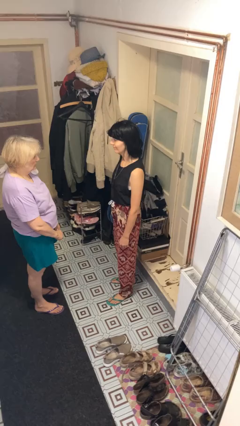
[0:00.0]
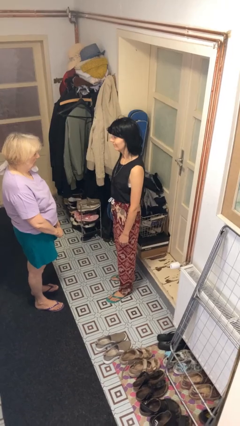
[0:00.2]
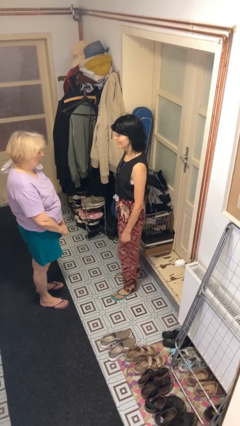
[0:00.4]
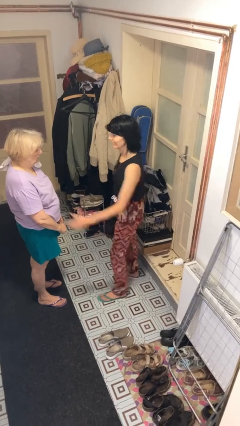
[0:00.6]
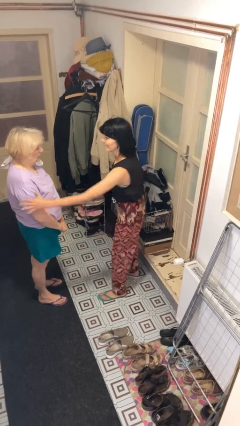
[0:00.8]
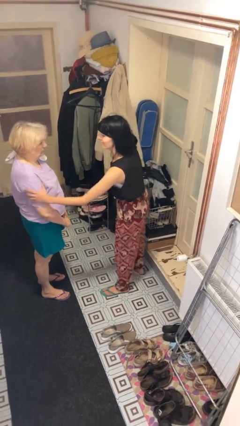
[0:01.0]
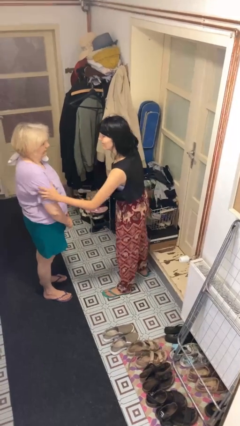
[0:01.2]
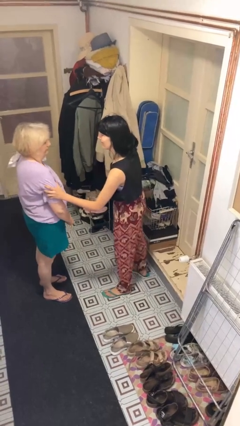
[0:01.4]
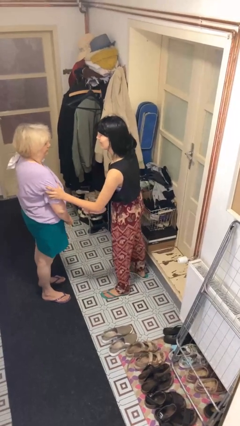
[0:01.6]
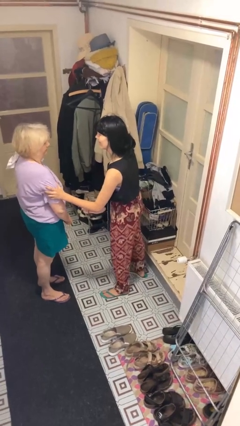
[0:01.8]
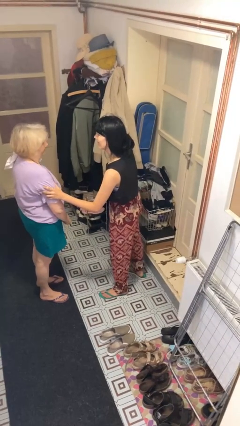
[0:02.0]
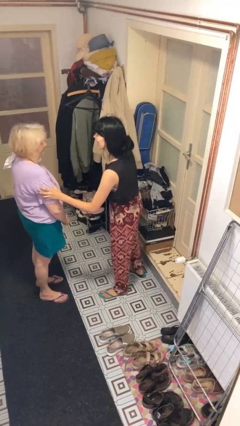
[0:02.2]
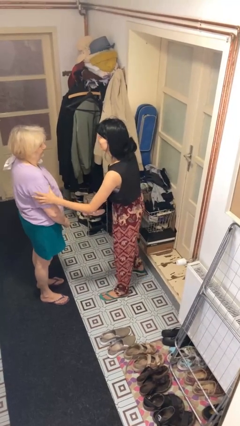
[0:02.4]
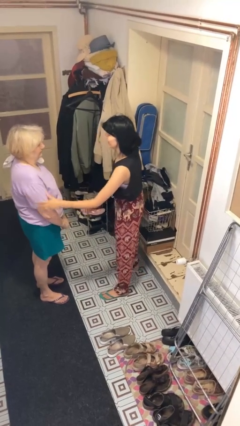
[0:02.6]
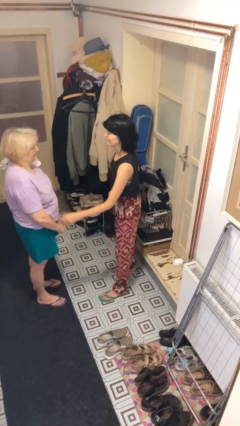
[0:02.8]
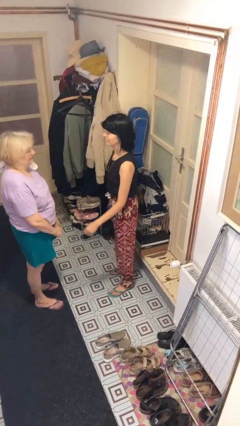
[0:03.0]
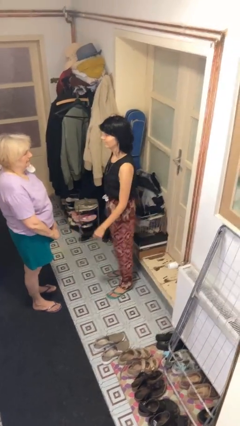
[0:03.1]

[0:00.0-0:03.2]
person grabs person by bicep

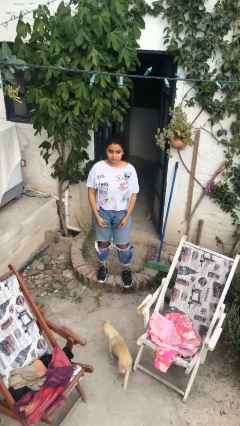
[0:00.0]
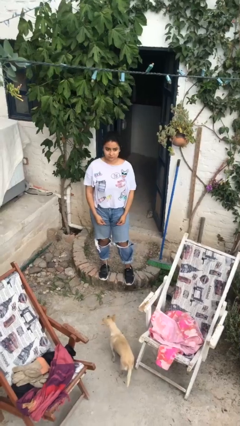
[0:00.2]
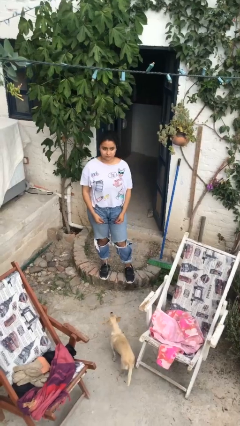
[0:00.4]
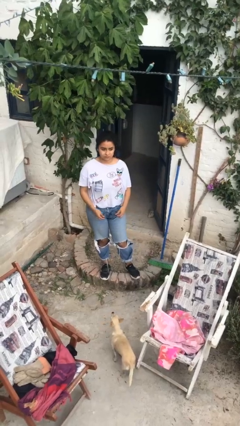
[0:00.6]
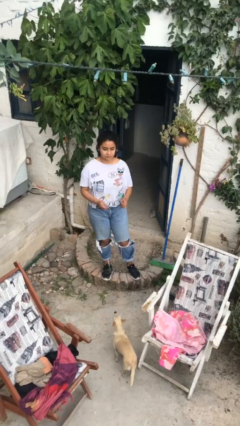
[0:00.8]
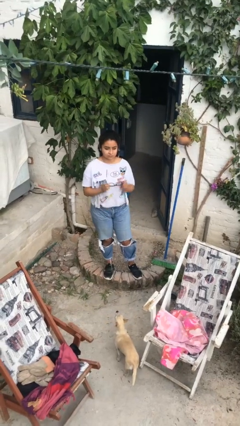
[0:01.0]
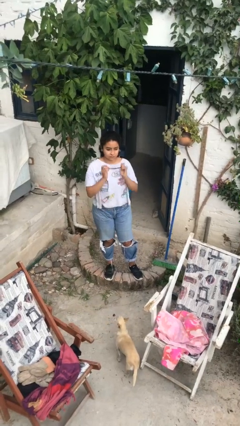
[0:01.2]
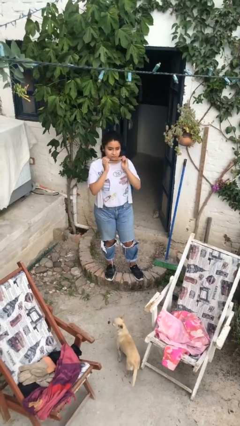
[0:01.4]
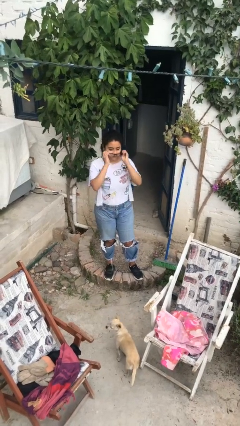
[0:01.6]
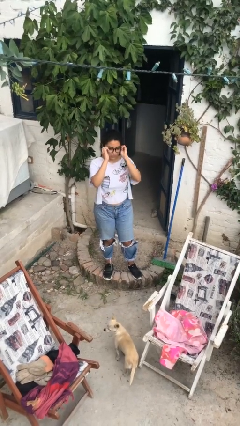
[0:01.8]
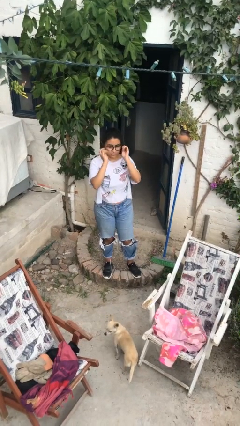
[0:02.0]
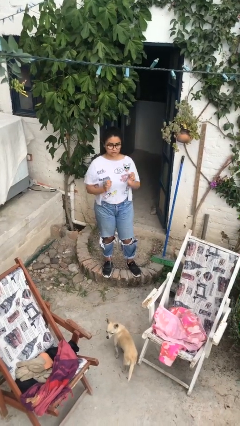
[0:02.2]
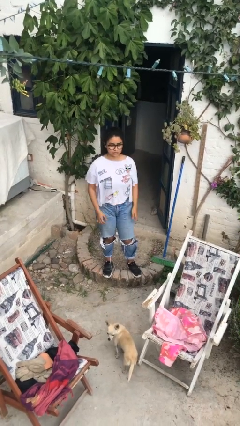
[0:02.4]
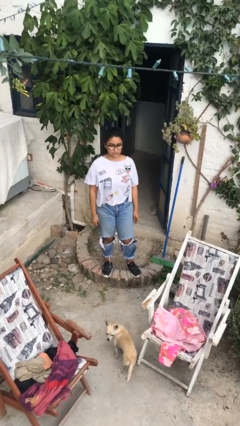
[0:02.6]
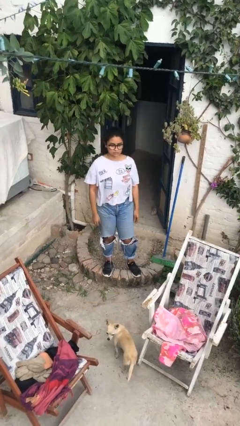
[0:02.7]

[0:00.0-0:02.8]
person puts on glasses

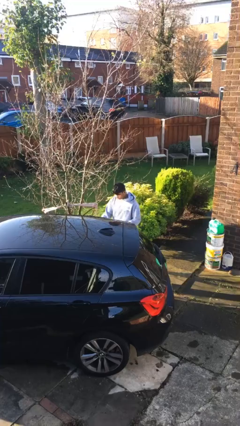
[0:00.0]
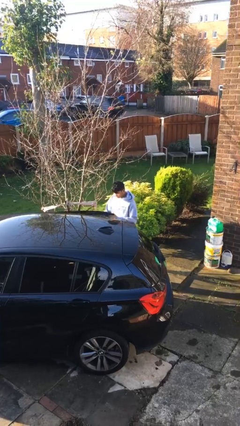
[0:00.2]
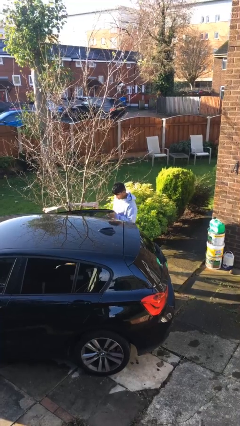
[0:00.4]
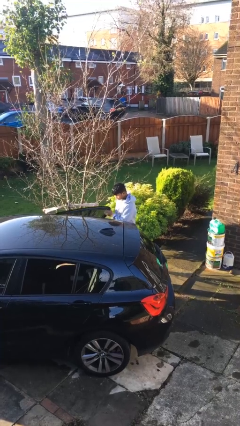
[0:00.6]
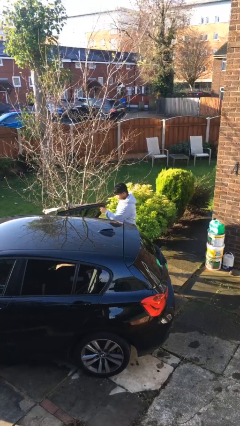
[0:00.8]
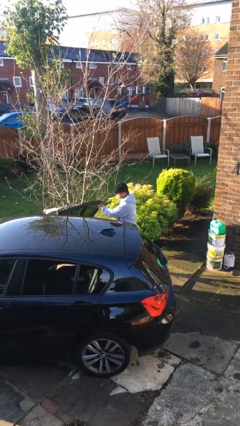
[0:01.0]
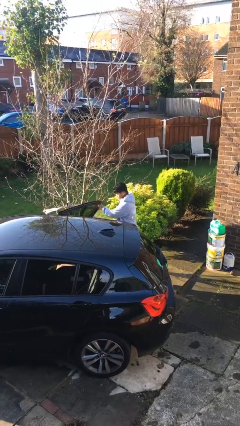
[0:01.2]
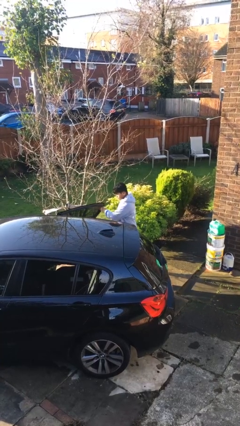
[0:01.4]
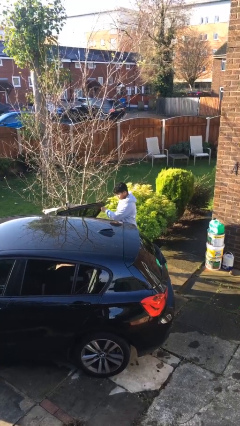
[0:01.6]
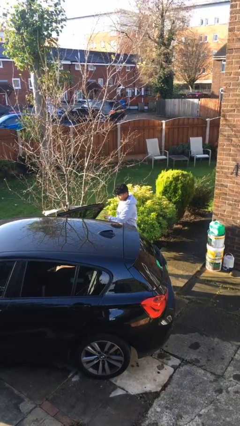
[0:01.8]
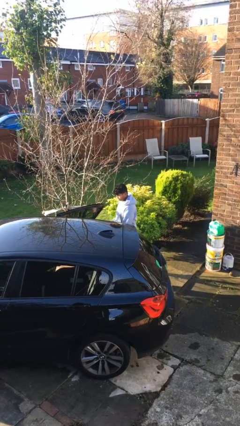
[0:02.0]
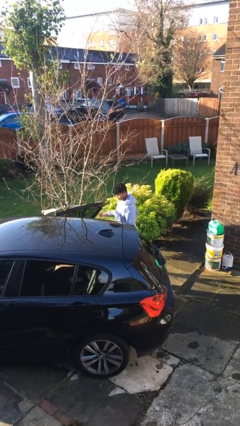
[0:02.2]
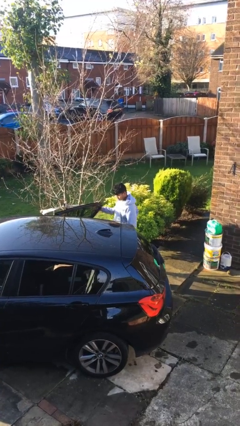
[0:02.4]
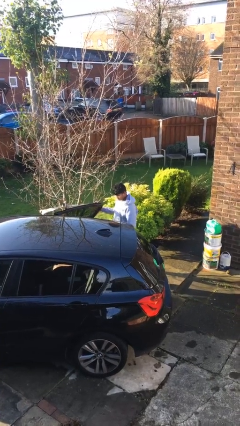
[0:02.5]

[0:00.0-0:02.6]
person opens car door

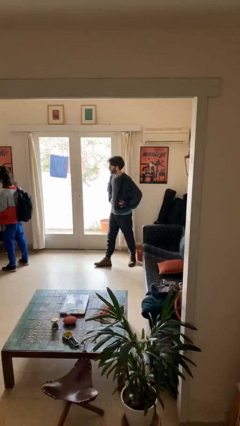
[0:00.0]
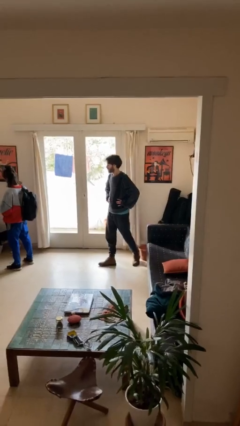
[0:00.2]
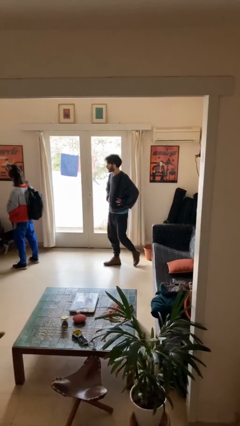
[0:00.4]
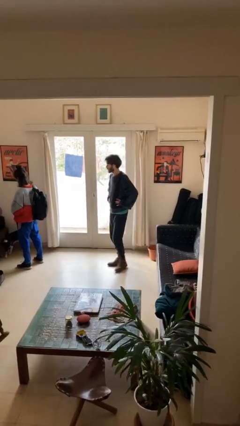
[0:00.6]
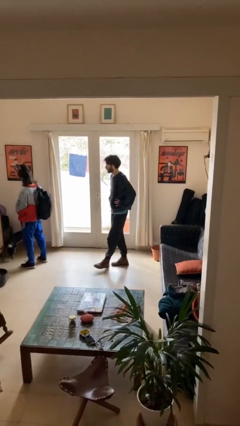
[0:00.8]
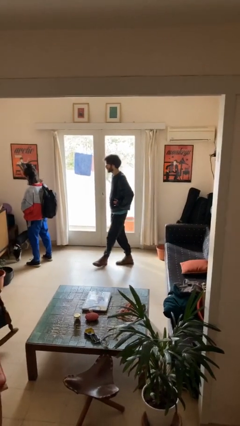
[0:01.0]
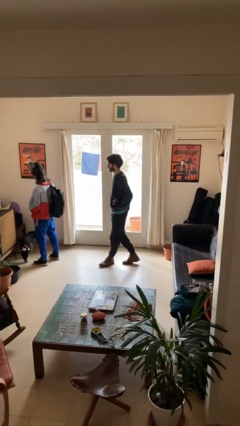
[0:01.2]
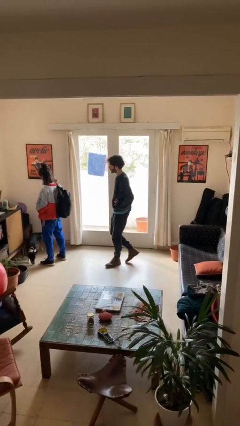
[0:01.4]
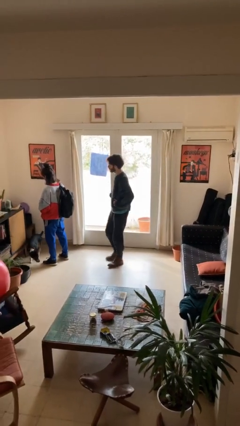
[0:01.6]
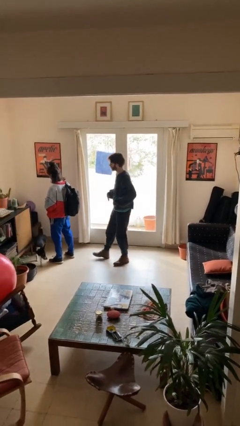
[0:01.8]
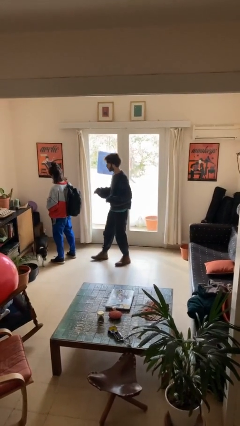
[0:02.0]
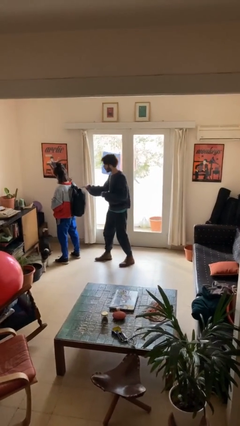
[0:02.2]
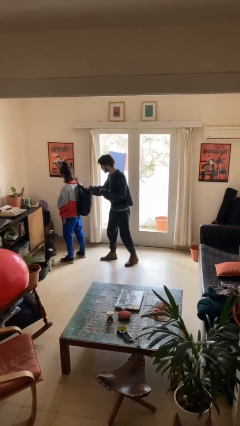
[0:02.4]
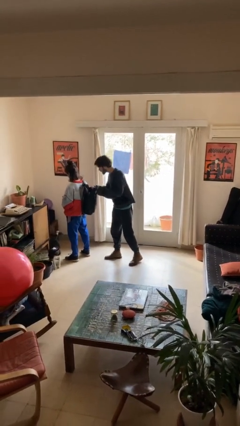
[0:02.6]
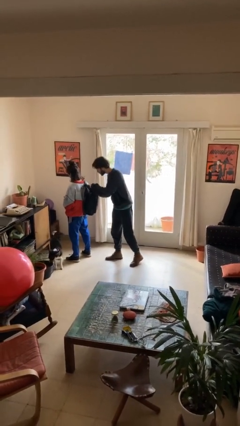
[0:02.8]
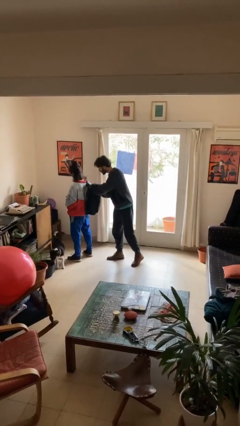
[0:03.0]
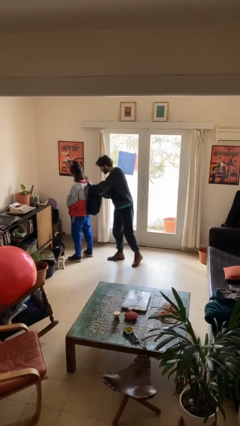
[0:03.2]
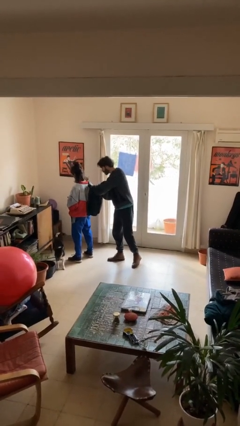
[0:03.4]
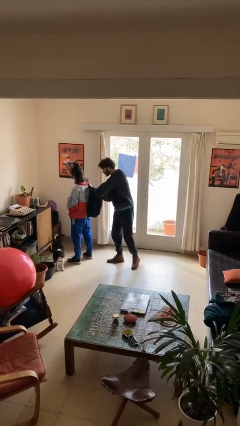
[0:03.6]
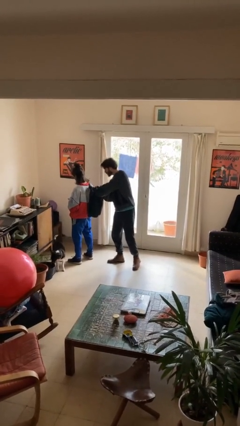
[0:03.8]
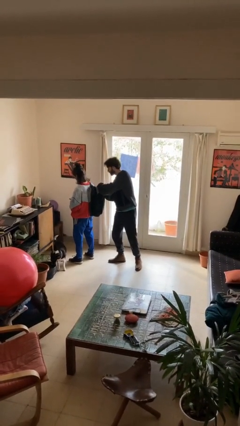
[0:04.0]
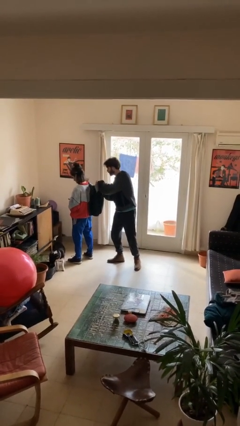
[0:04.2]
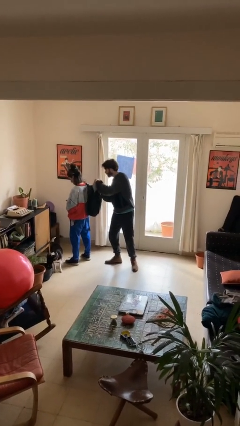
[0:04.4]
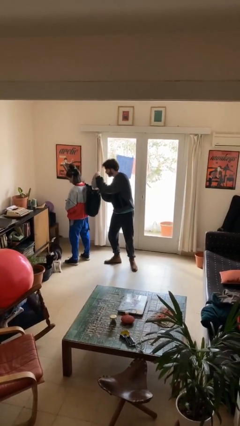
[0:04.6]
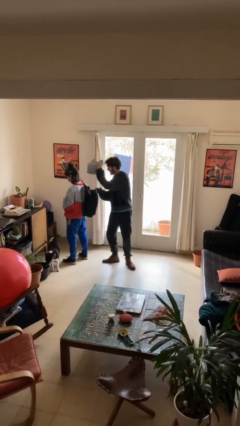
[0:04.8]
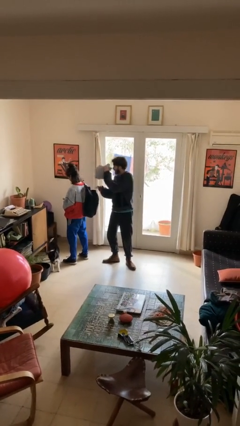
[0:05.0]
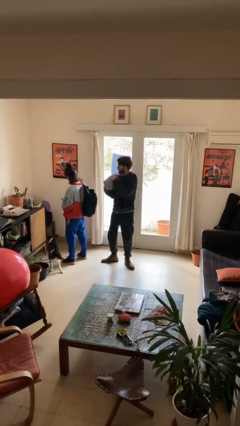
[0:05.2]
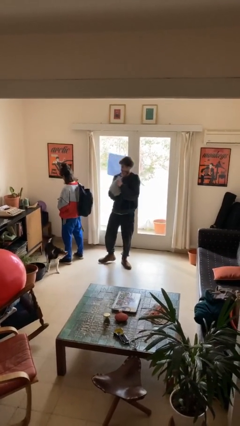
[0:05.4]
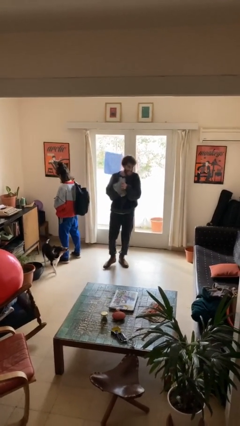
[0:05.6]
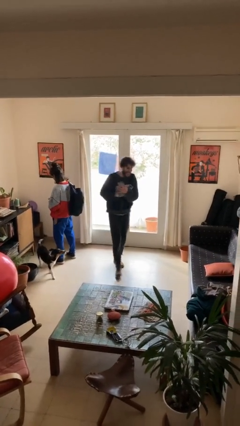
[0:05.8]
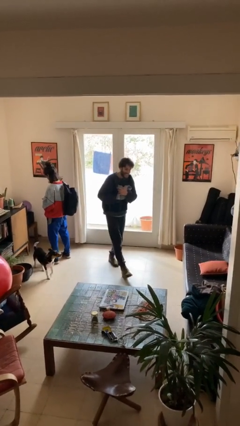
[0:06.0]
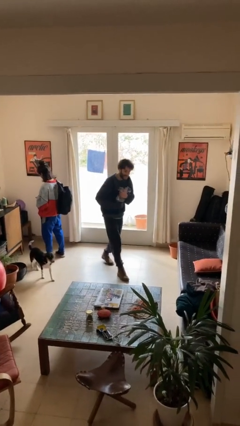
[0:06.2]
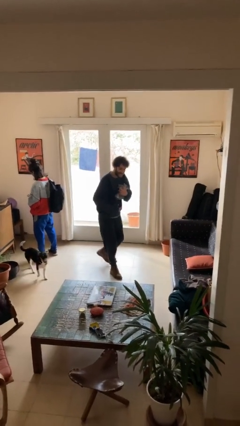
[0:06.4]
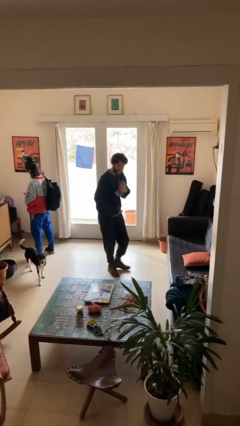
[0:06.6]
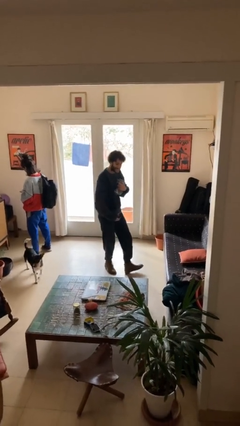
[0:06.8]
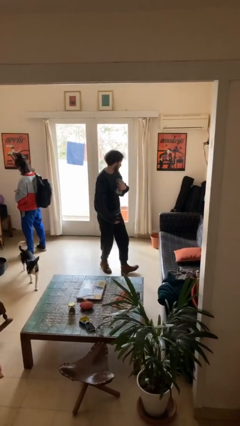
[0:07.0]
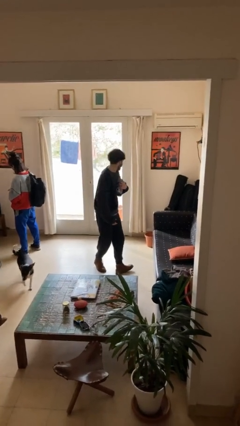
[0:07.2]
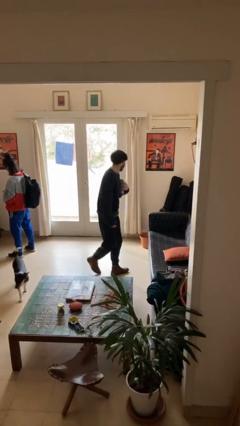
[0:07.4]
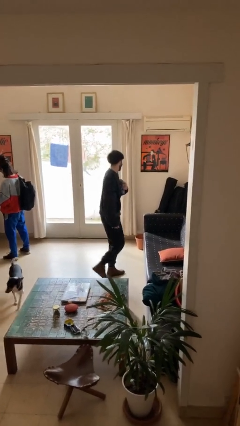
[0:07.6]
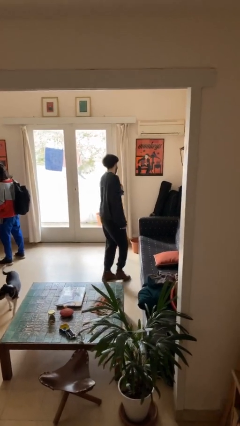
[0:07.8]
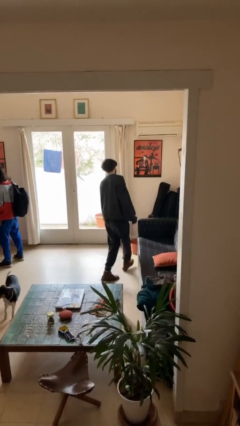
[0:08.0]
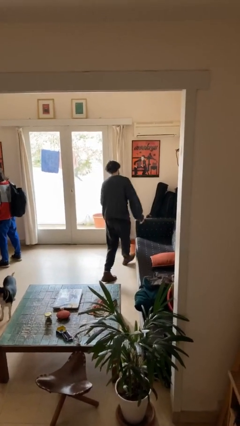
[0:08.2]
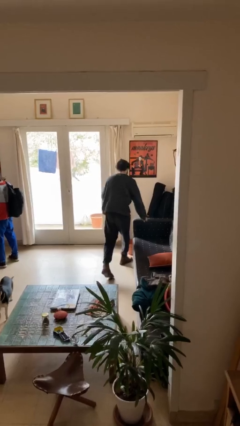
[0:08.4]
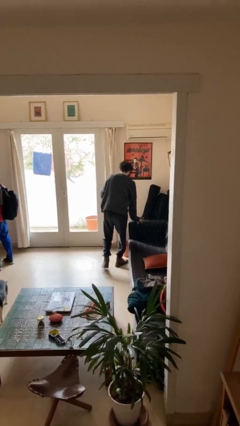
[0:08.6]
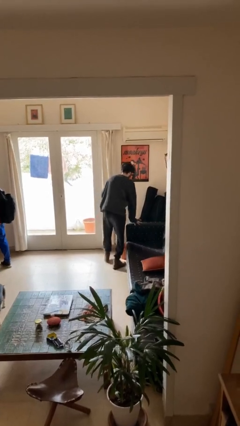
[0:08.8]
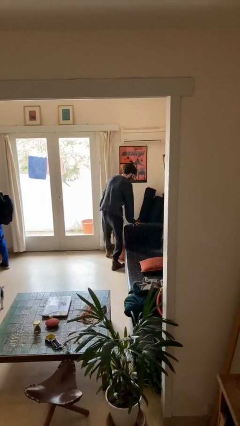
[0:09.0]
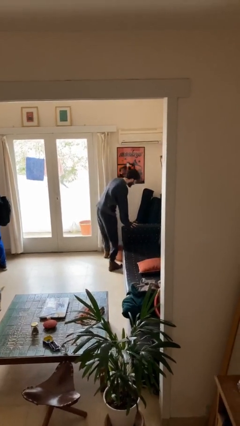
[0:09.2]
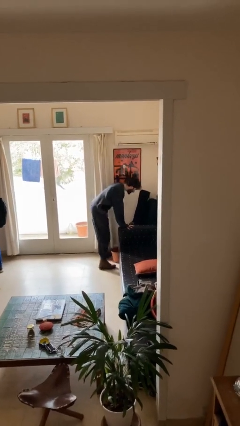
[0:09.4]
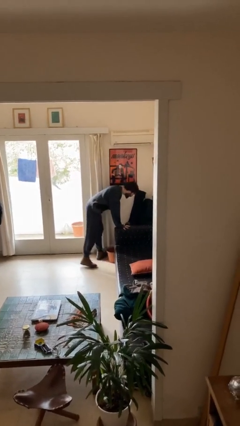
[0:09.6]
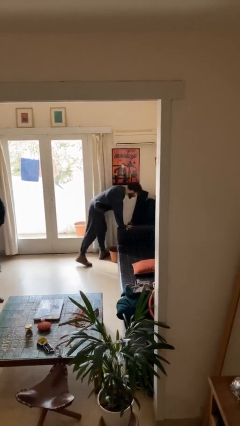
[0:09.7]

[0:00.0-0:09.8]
person steals object from person
